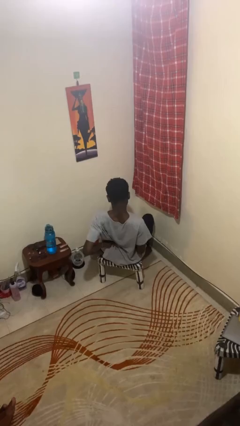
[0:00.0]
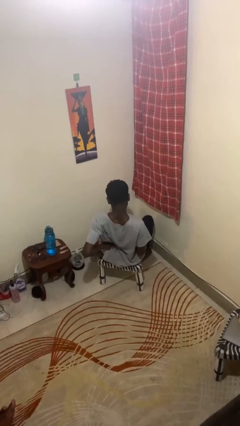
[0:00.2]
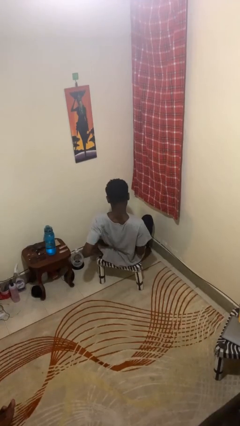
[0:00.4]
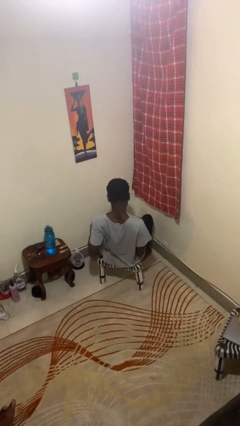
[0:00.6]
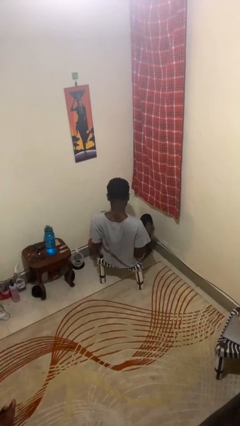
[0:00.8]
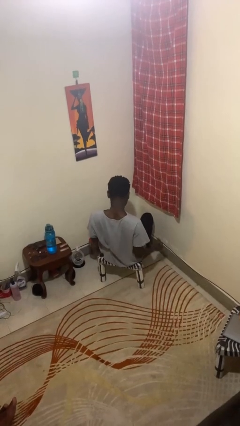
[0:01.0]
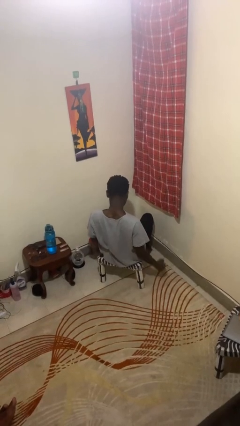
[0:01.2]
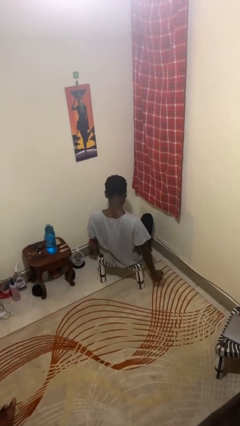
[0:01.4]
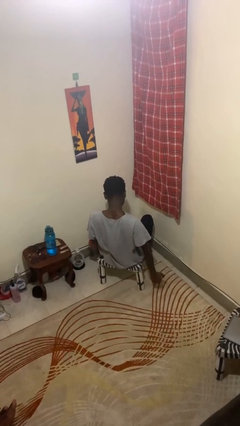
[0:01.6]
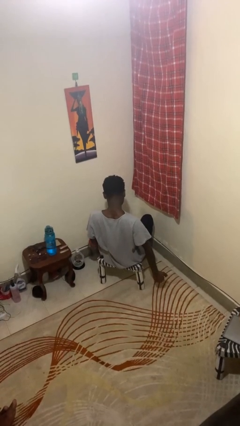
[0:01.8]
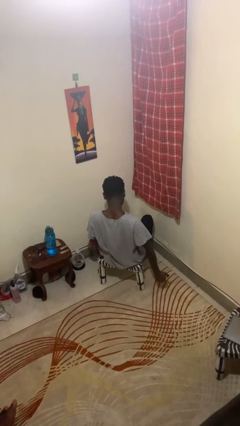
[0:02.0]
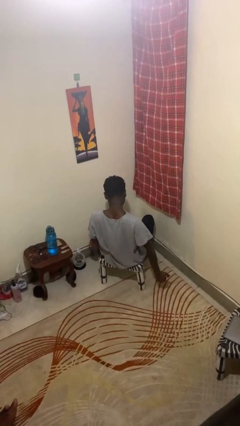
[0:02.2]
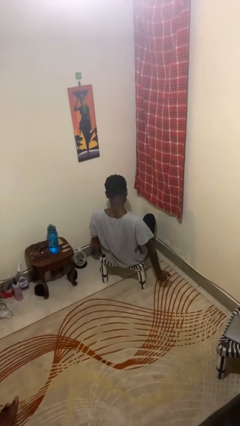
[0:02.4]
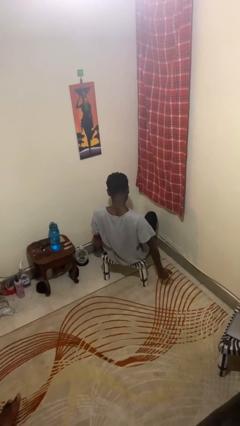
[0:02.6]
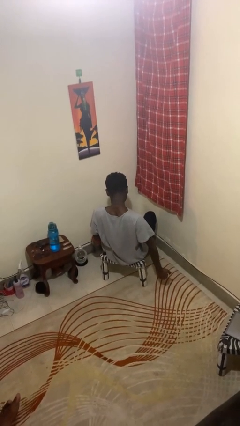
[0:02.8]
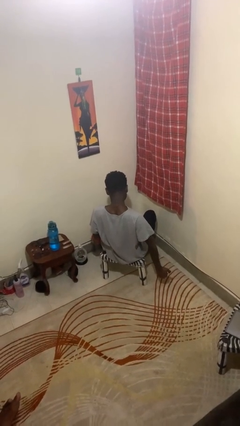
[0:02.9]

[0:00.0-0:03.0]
person stretches arms to side

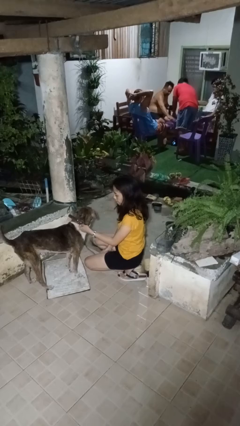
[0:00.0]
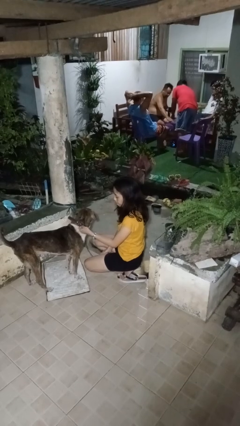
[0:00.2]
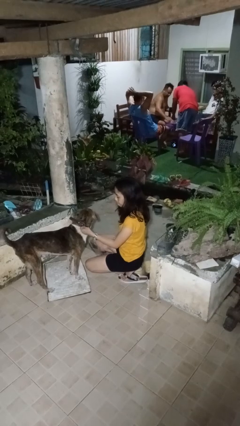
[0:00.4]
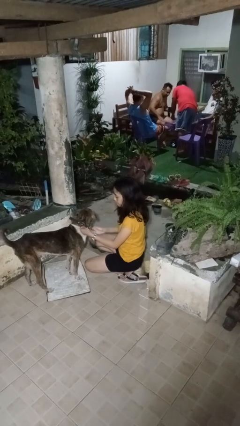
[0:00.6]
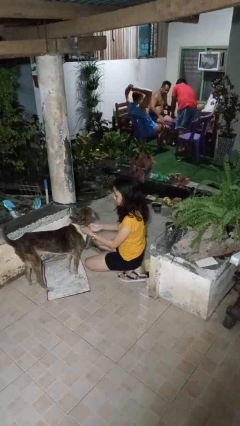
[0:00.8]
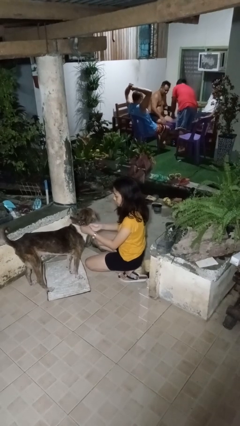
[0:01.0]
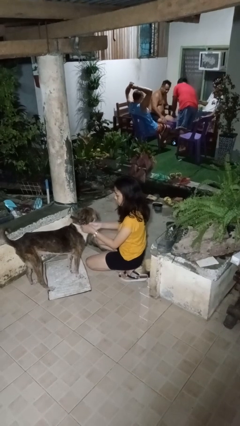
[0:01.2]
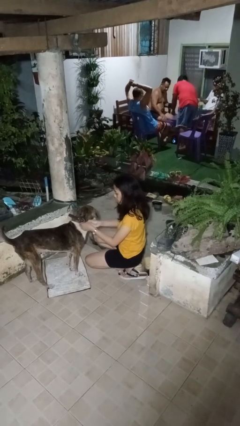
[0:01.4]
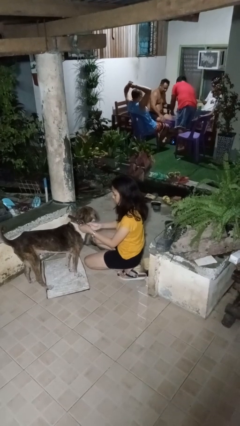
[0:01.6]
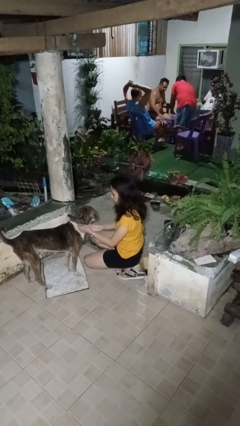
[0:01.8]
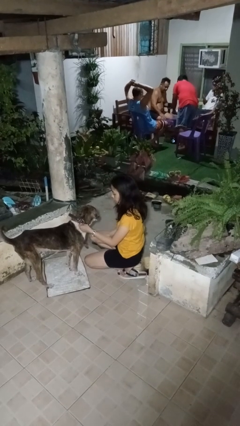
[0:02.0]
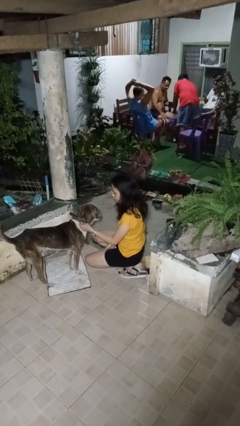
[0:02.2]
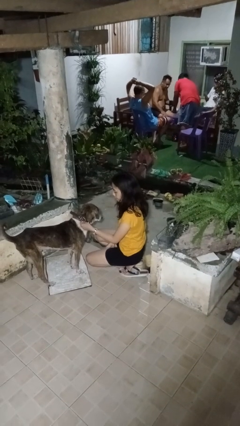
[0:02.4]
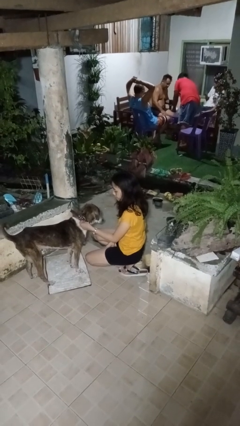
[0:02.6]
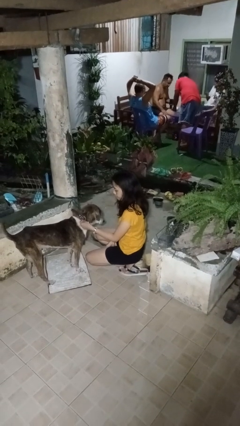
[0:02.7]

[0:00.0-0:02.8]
person attaches leash to dog

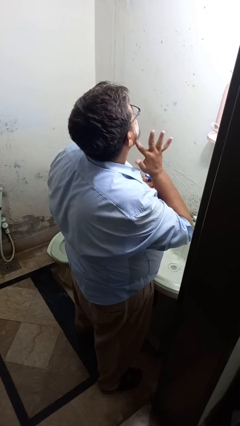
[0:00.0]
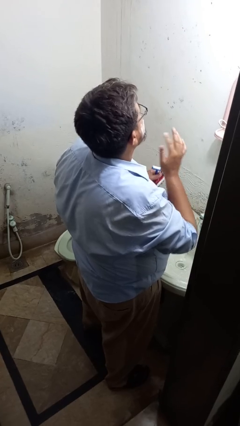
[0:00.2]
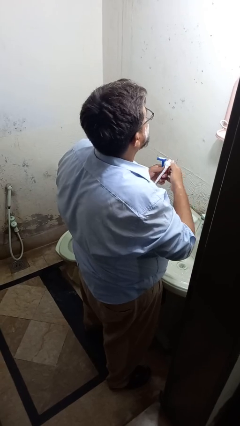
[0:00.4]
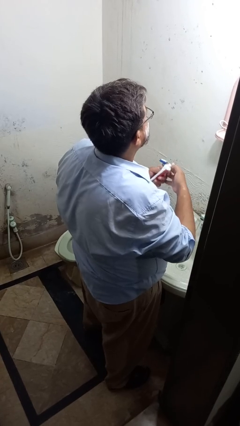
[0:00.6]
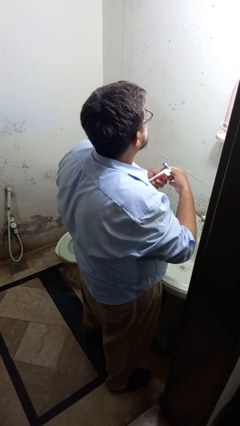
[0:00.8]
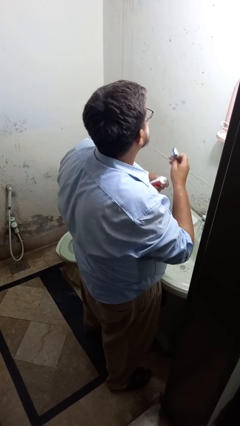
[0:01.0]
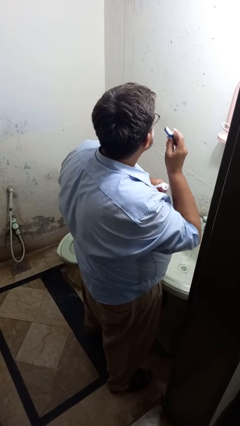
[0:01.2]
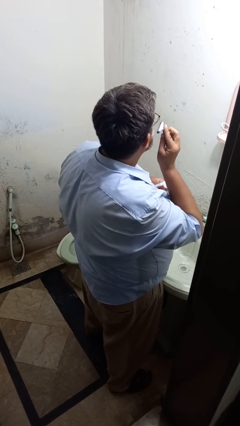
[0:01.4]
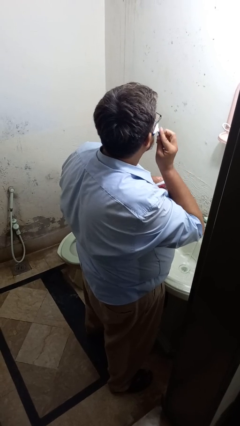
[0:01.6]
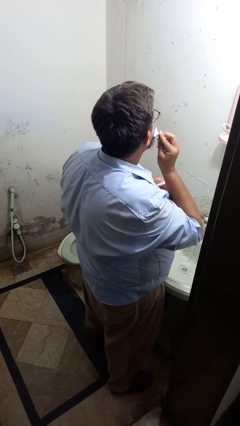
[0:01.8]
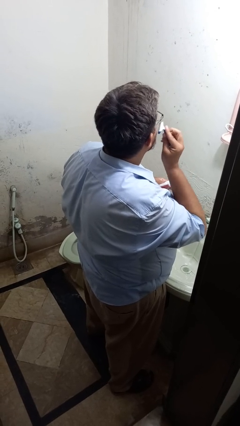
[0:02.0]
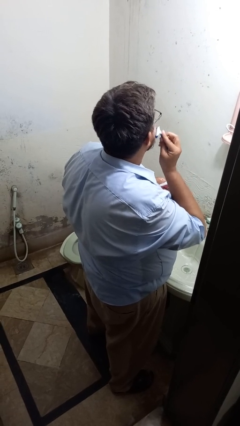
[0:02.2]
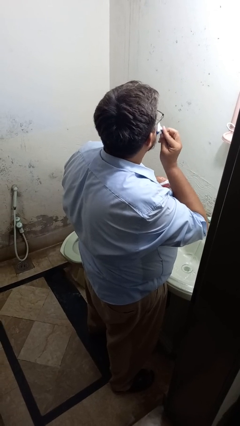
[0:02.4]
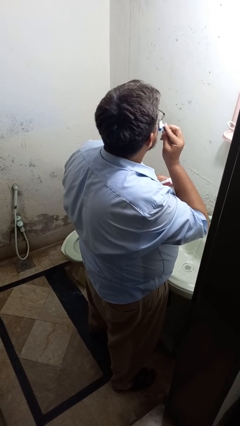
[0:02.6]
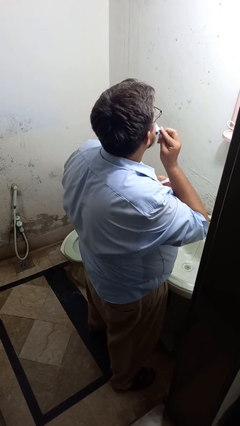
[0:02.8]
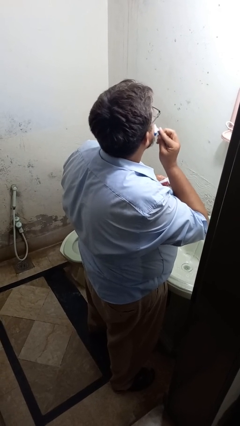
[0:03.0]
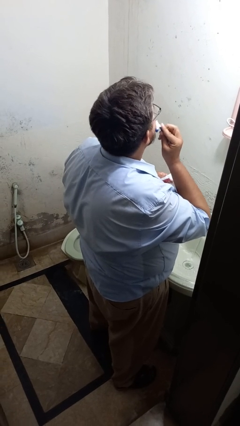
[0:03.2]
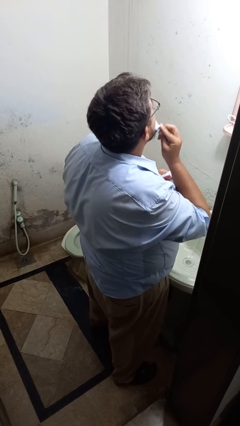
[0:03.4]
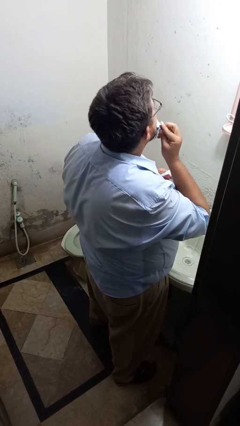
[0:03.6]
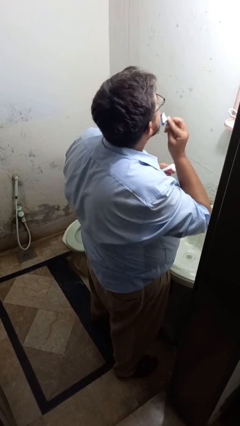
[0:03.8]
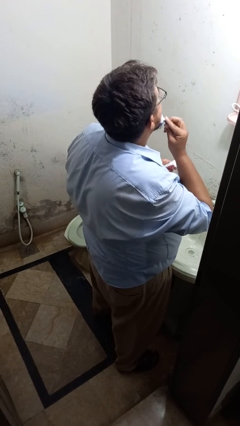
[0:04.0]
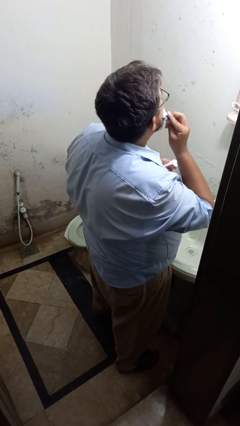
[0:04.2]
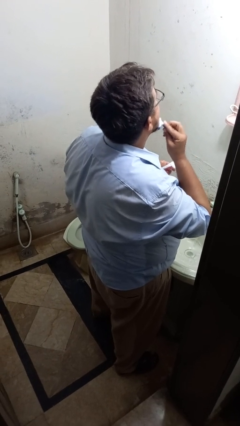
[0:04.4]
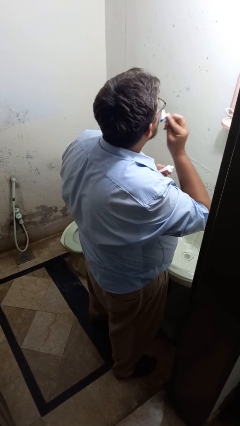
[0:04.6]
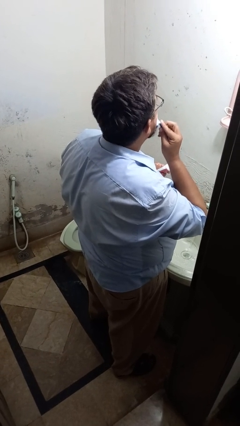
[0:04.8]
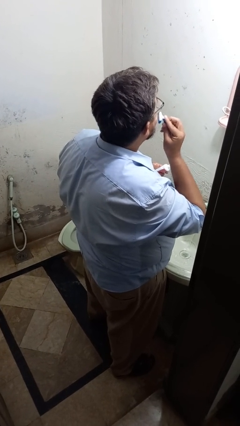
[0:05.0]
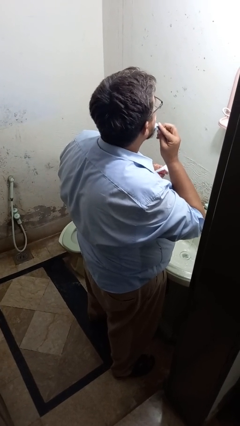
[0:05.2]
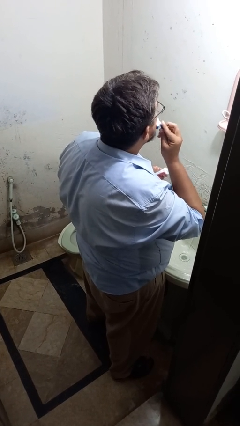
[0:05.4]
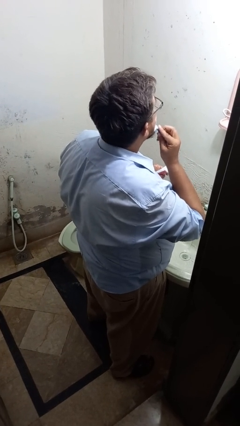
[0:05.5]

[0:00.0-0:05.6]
person shaves face

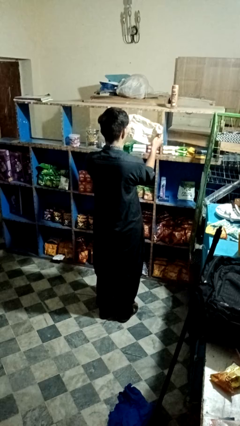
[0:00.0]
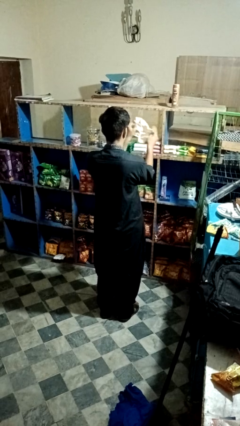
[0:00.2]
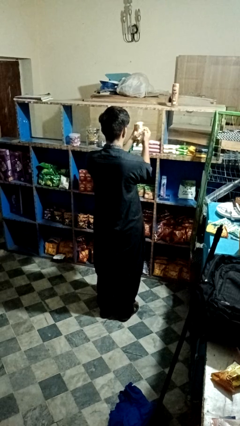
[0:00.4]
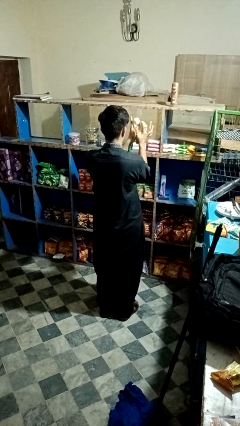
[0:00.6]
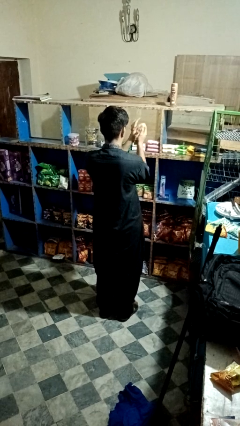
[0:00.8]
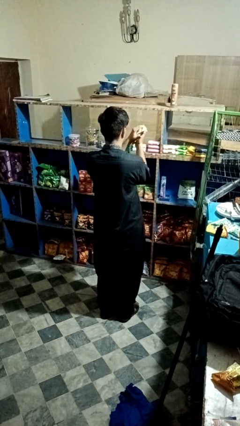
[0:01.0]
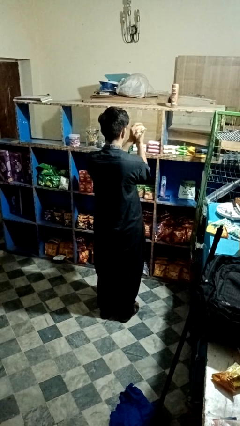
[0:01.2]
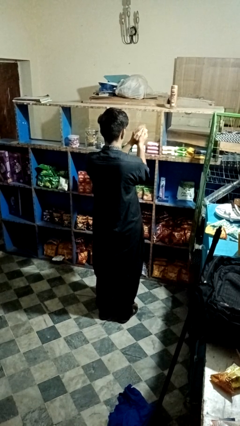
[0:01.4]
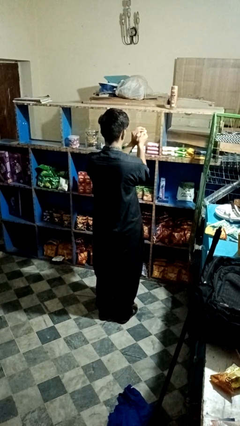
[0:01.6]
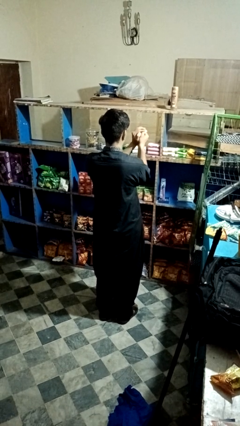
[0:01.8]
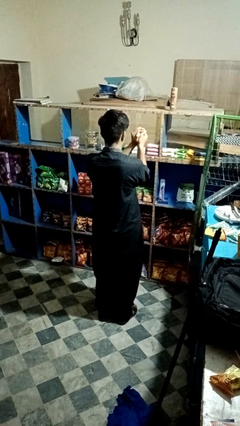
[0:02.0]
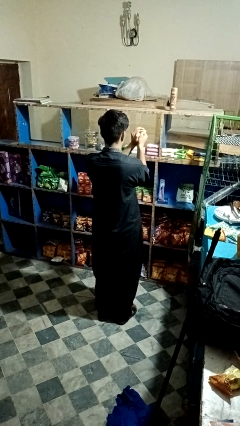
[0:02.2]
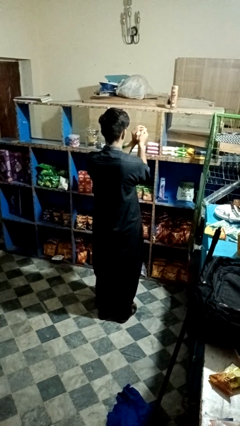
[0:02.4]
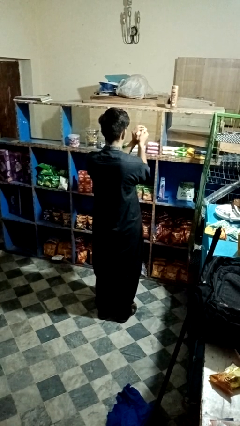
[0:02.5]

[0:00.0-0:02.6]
person crumples paper

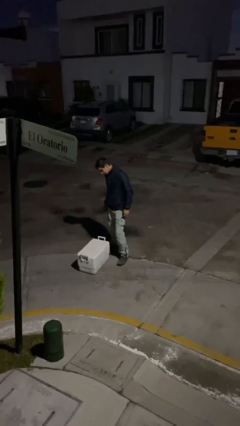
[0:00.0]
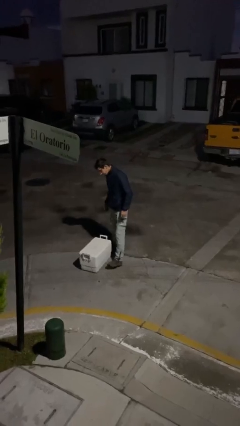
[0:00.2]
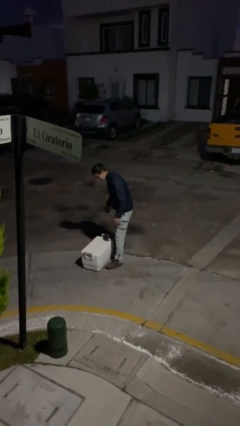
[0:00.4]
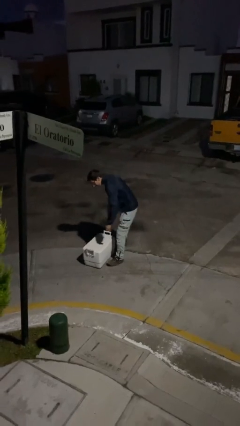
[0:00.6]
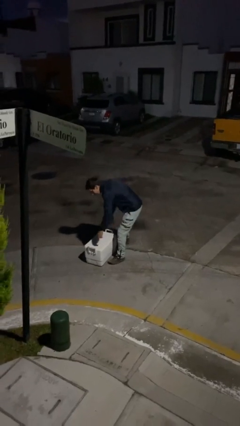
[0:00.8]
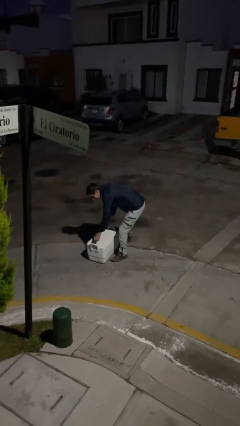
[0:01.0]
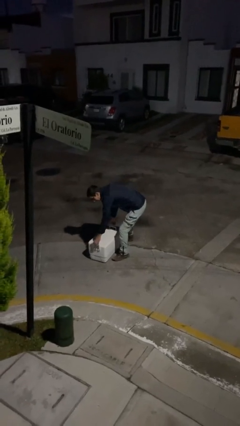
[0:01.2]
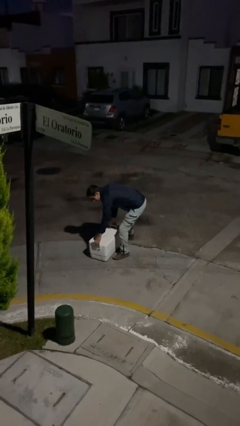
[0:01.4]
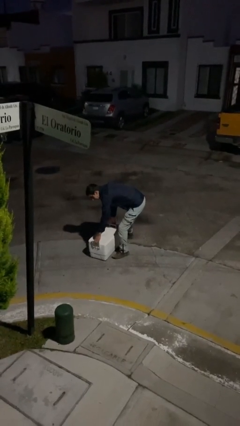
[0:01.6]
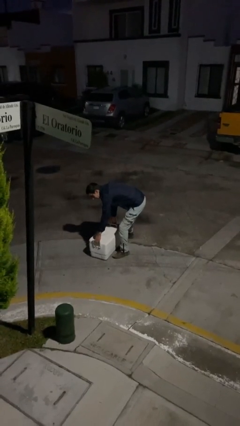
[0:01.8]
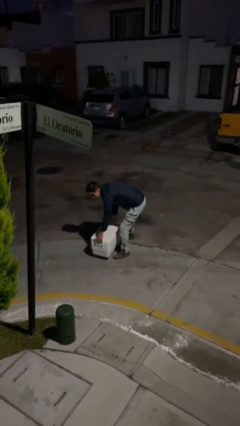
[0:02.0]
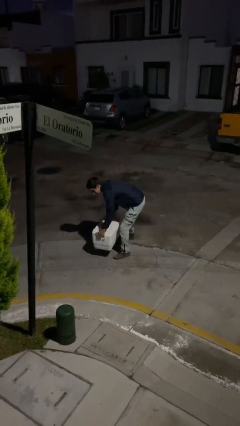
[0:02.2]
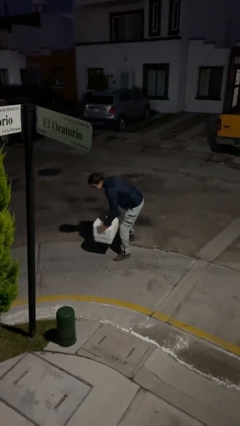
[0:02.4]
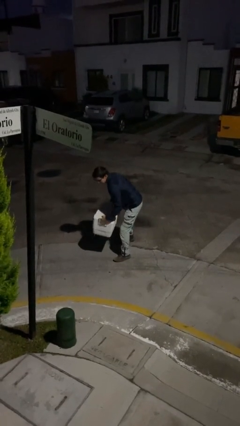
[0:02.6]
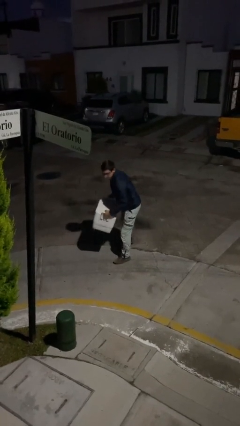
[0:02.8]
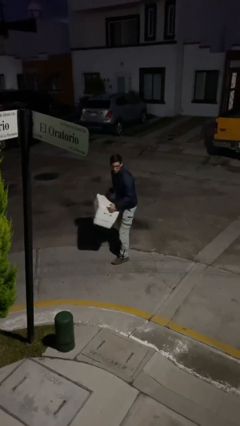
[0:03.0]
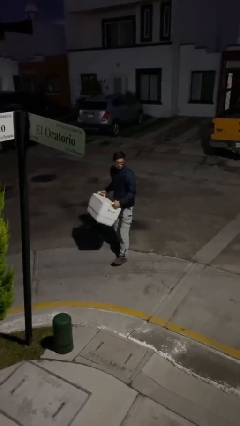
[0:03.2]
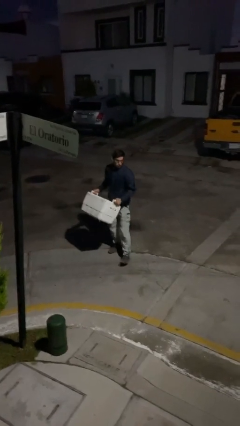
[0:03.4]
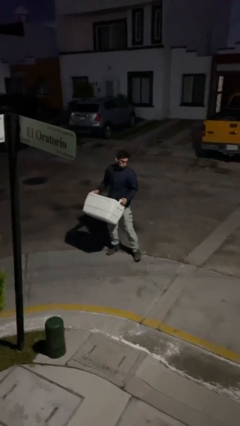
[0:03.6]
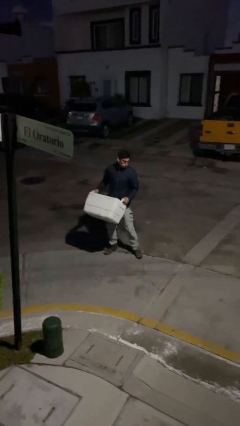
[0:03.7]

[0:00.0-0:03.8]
person picks up object from floor
